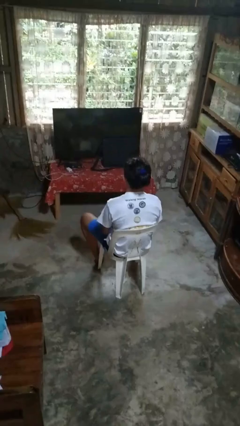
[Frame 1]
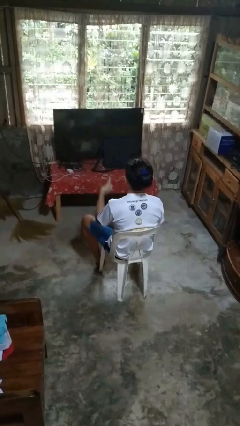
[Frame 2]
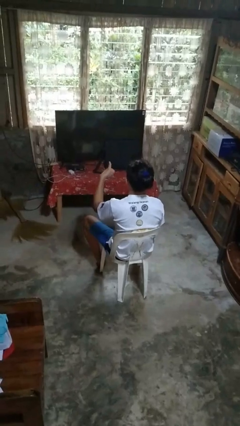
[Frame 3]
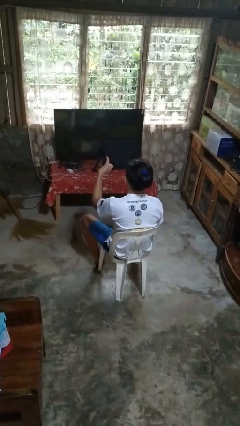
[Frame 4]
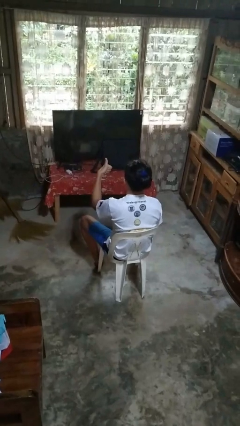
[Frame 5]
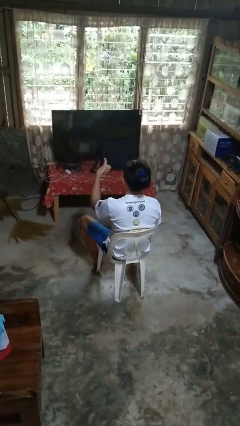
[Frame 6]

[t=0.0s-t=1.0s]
person gestures thumbs up

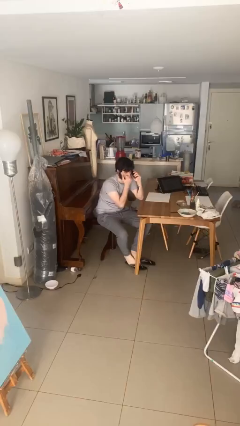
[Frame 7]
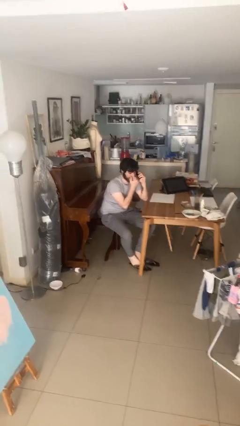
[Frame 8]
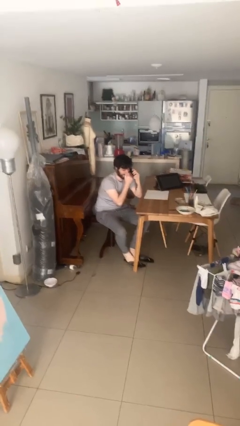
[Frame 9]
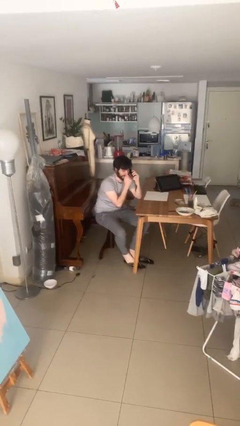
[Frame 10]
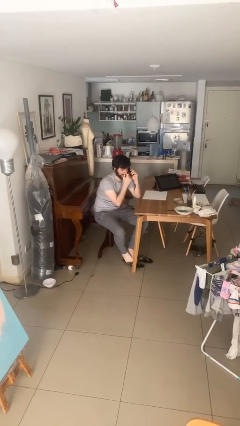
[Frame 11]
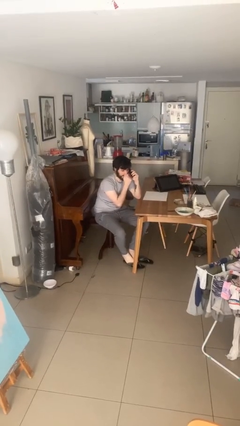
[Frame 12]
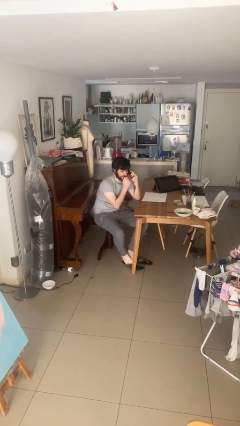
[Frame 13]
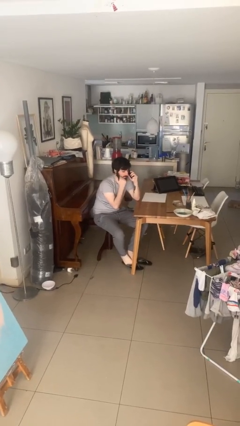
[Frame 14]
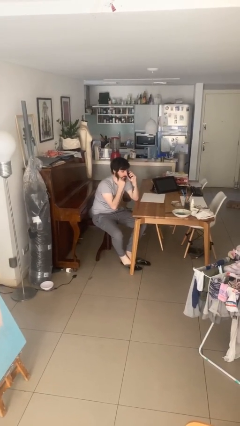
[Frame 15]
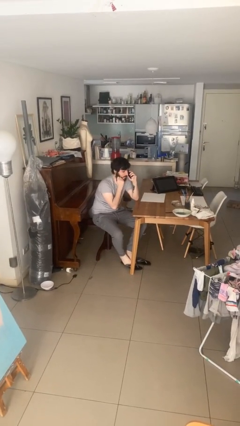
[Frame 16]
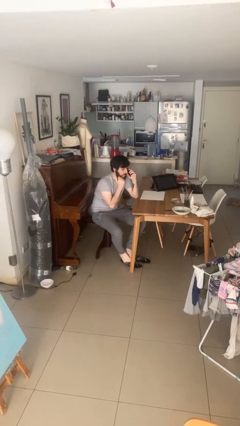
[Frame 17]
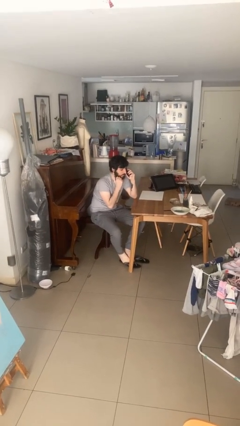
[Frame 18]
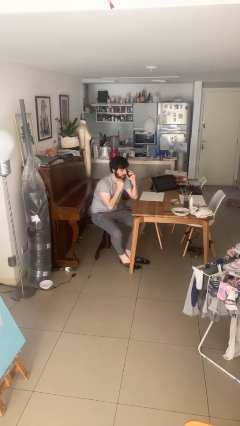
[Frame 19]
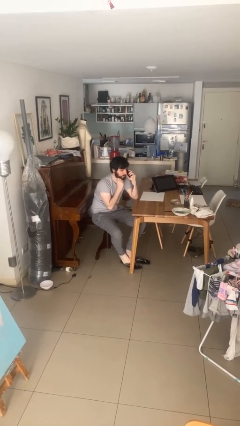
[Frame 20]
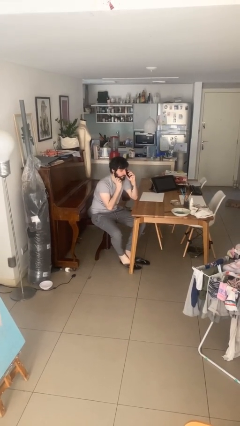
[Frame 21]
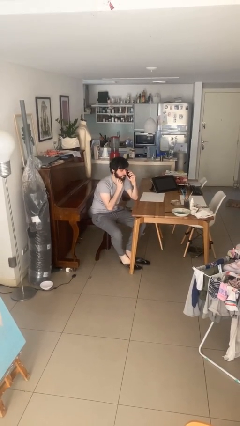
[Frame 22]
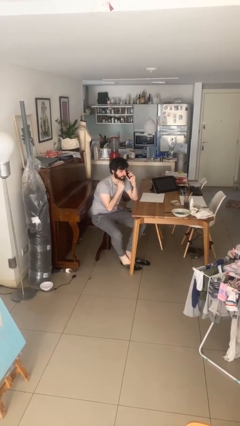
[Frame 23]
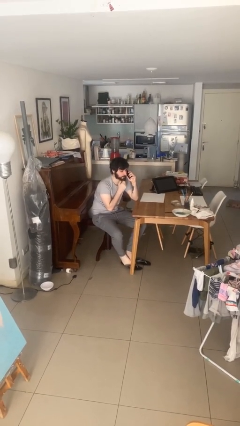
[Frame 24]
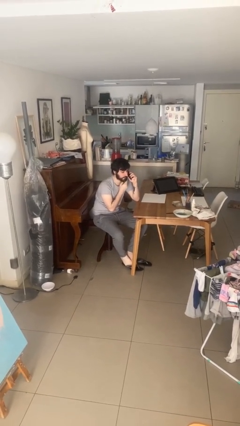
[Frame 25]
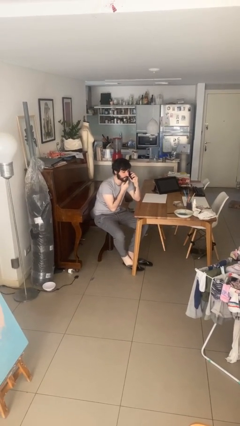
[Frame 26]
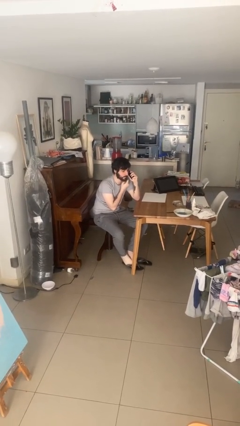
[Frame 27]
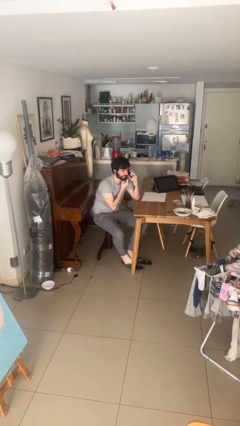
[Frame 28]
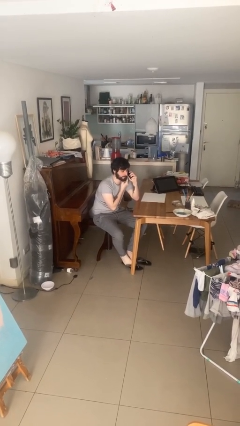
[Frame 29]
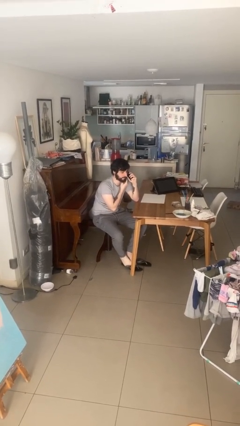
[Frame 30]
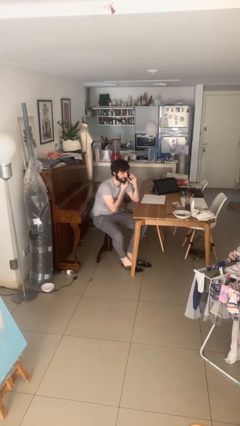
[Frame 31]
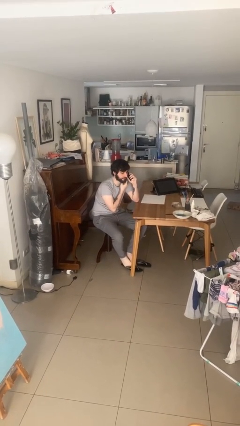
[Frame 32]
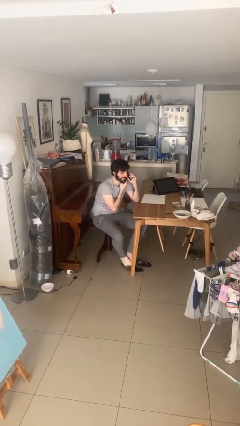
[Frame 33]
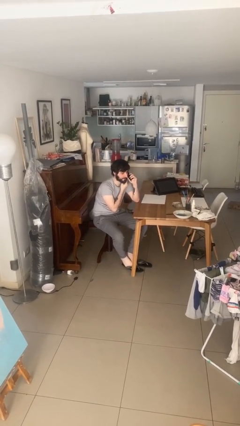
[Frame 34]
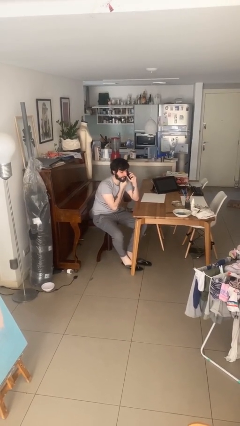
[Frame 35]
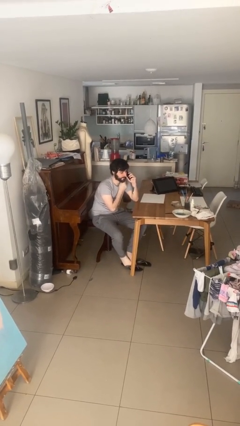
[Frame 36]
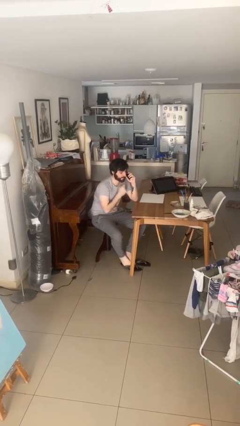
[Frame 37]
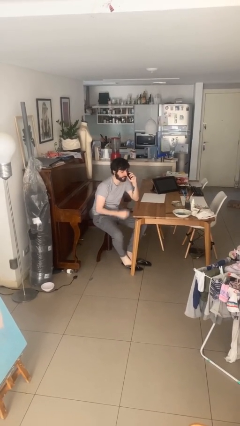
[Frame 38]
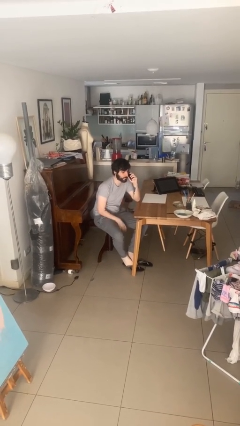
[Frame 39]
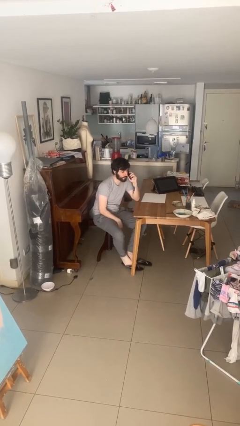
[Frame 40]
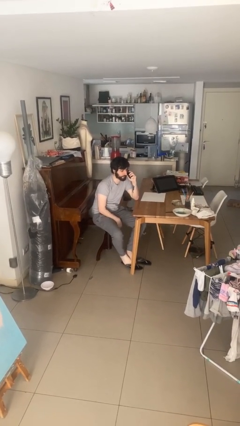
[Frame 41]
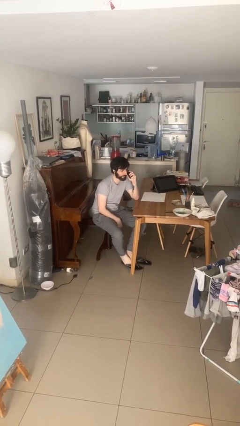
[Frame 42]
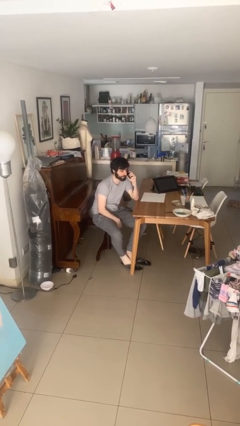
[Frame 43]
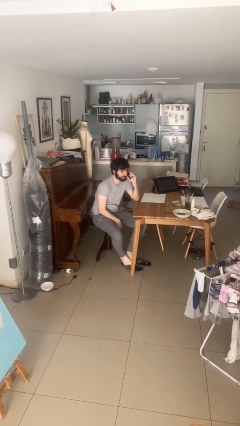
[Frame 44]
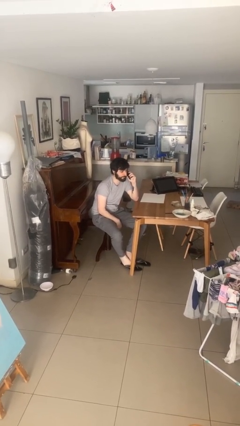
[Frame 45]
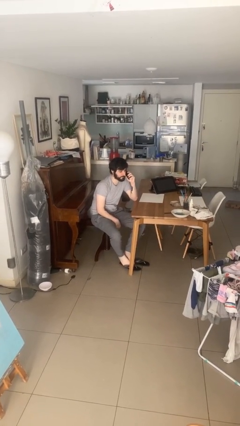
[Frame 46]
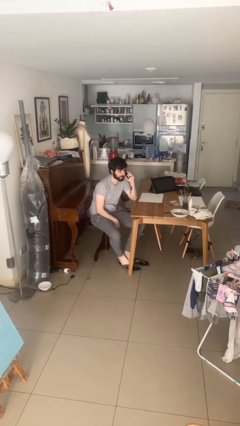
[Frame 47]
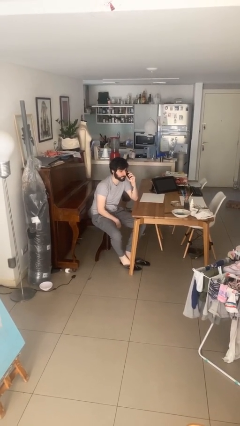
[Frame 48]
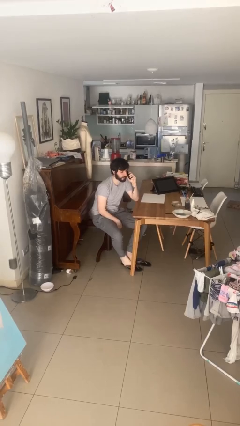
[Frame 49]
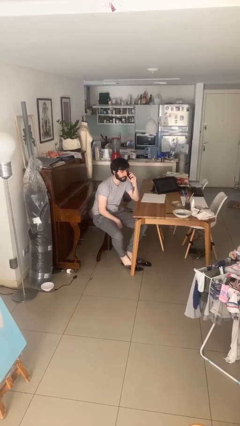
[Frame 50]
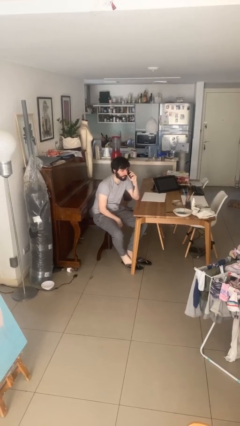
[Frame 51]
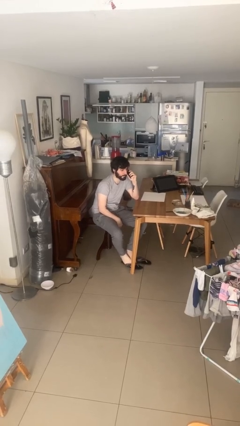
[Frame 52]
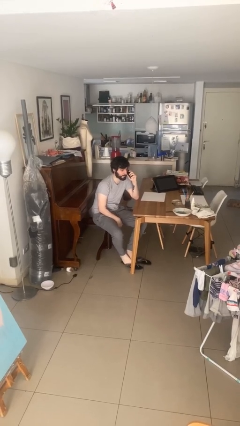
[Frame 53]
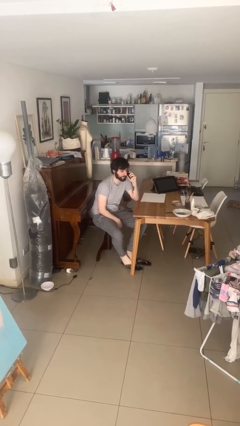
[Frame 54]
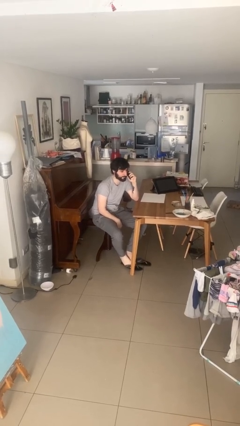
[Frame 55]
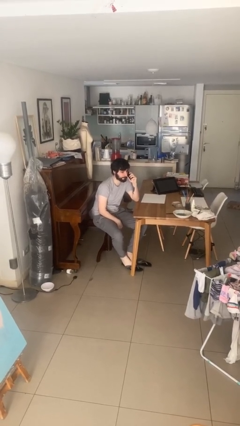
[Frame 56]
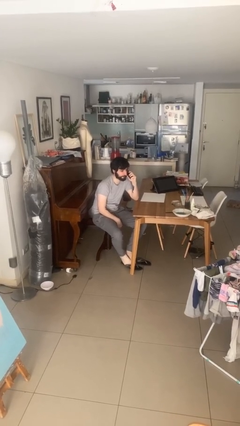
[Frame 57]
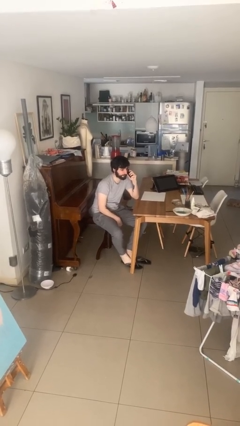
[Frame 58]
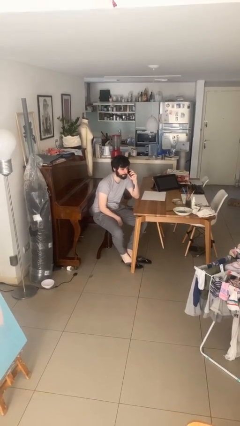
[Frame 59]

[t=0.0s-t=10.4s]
person talks on phone

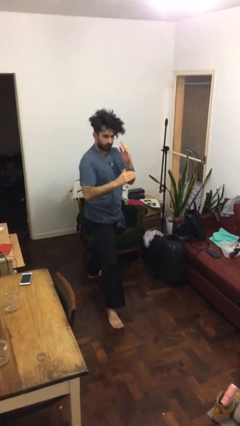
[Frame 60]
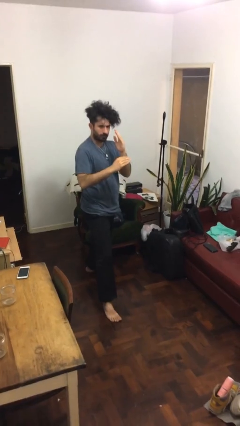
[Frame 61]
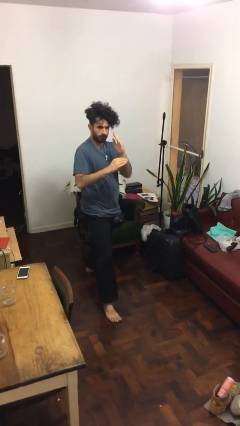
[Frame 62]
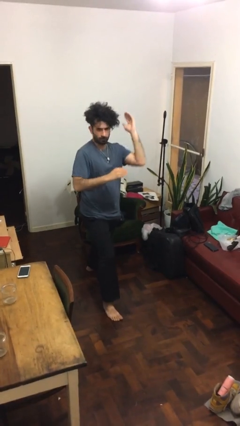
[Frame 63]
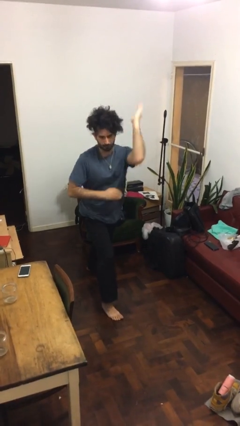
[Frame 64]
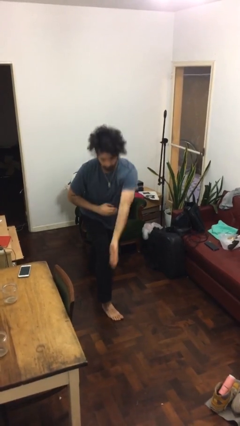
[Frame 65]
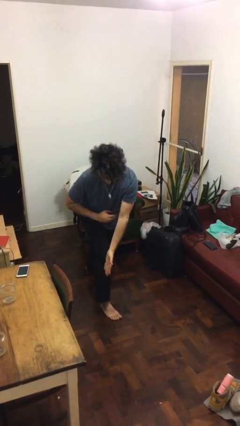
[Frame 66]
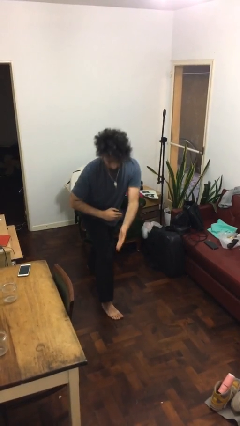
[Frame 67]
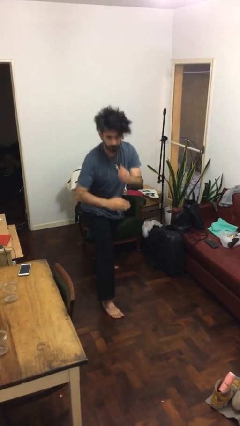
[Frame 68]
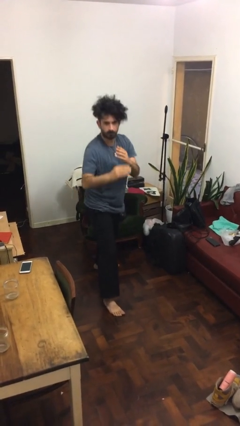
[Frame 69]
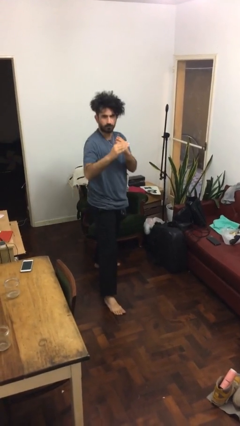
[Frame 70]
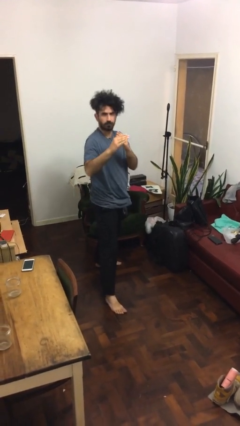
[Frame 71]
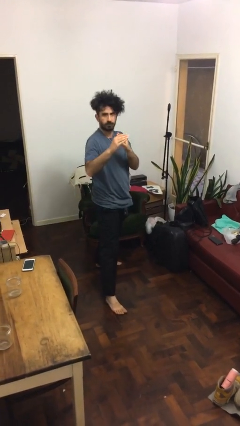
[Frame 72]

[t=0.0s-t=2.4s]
person karate chop

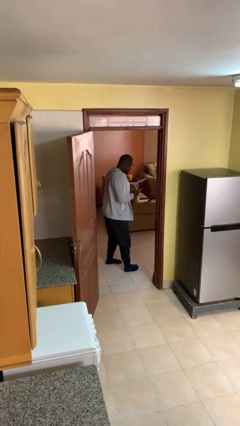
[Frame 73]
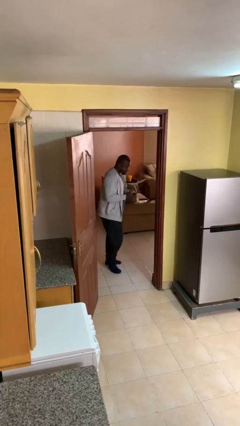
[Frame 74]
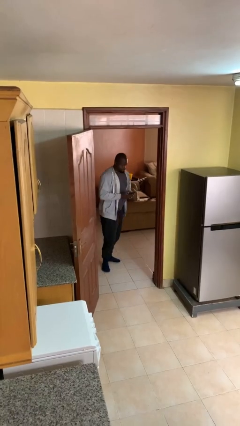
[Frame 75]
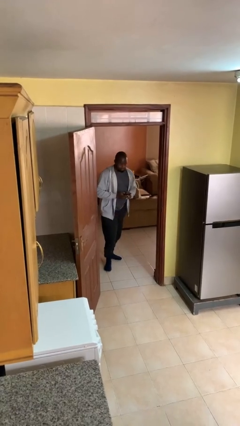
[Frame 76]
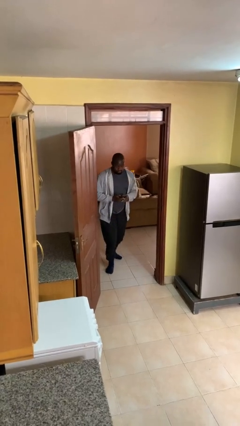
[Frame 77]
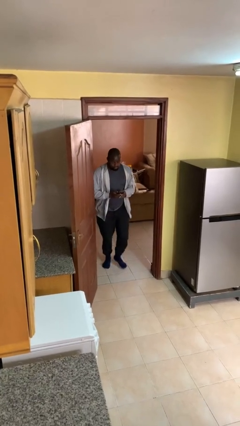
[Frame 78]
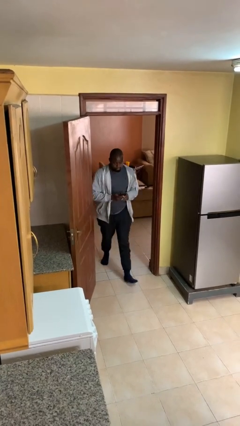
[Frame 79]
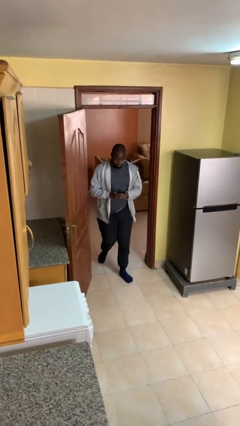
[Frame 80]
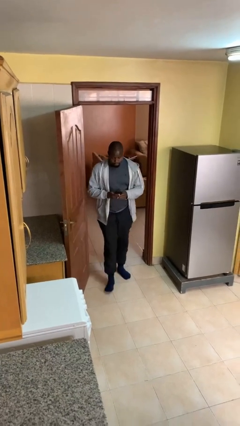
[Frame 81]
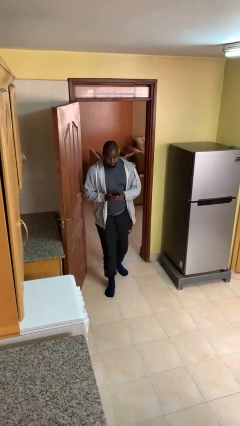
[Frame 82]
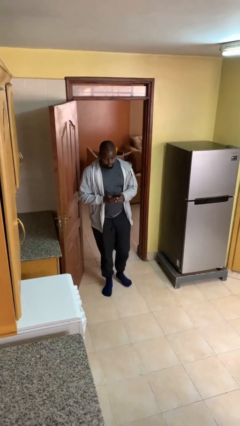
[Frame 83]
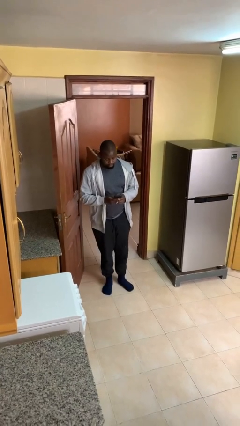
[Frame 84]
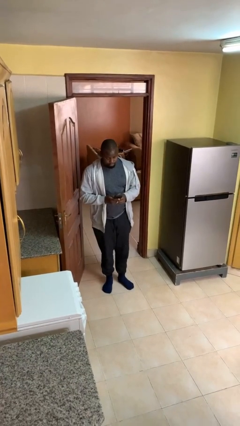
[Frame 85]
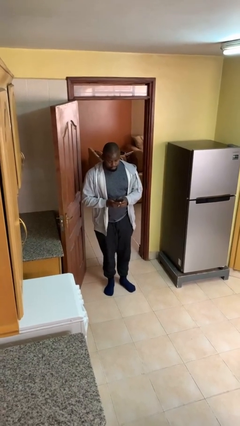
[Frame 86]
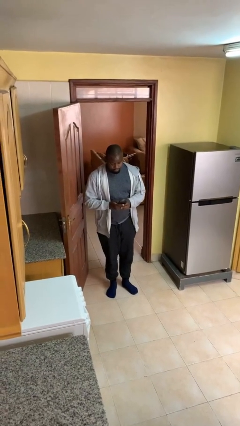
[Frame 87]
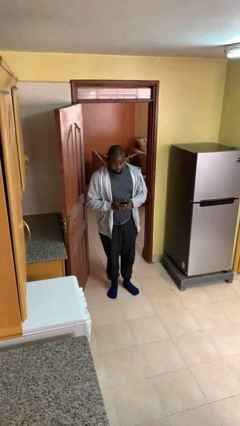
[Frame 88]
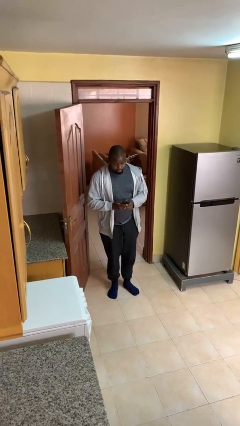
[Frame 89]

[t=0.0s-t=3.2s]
person enters scene through structure

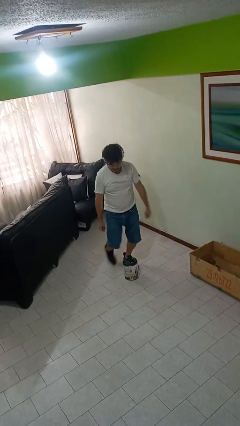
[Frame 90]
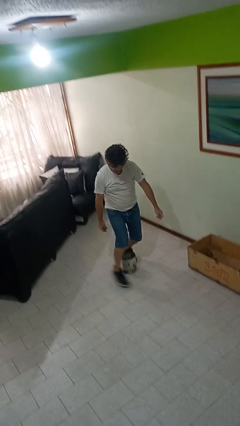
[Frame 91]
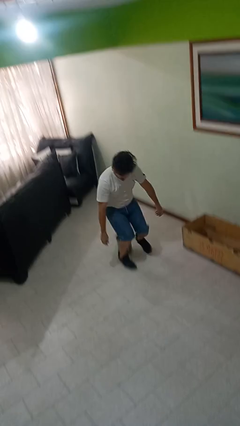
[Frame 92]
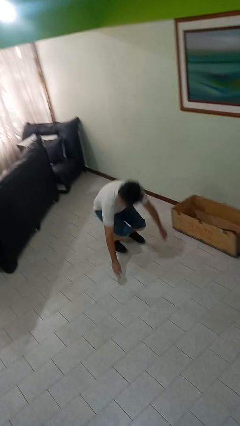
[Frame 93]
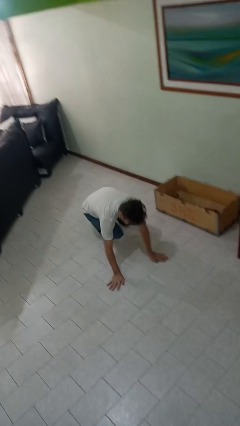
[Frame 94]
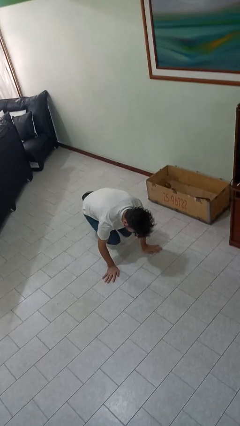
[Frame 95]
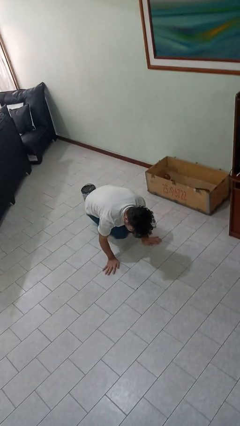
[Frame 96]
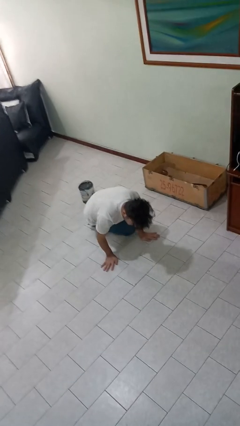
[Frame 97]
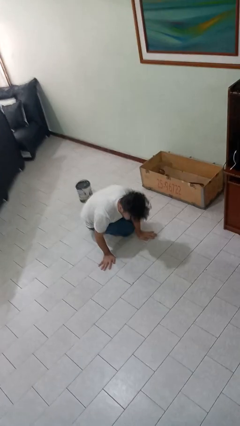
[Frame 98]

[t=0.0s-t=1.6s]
person trips on object on floor
